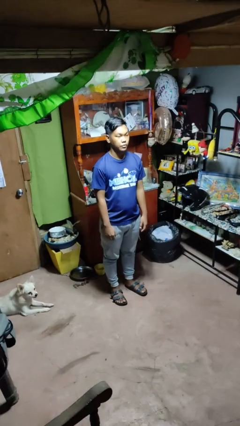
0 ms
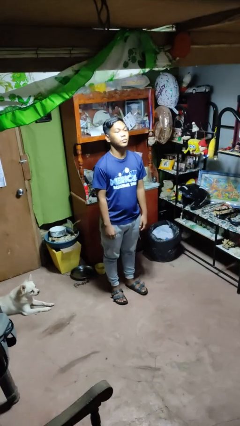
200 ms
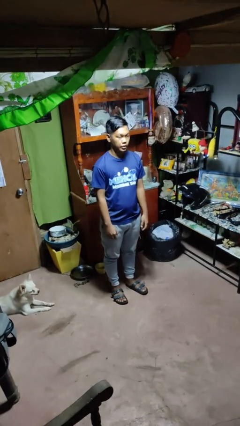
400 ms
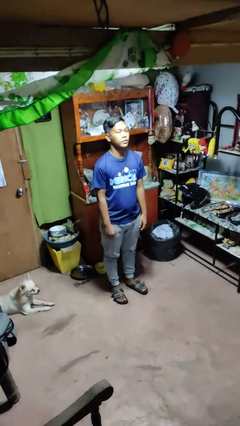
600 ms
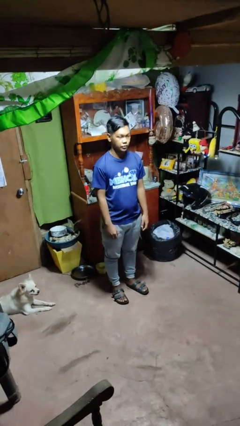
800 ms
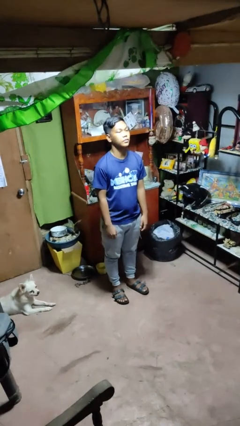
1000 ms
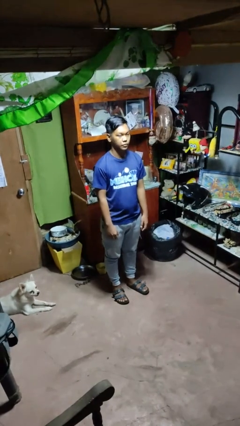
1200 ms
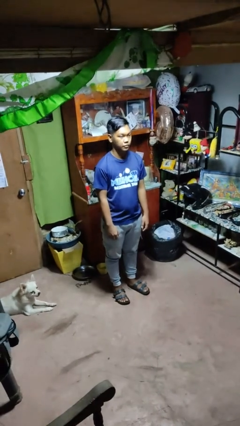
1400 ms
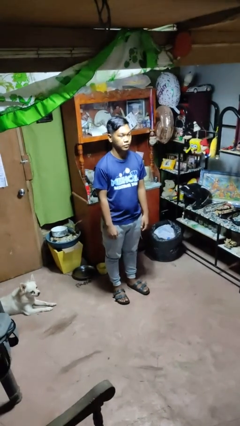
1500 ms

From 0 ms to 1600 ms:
person nods head

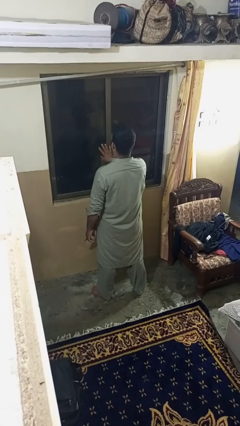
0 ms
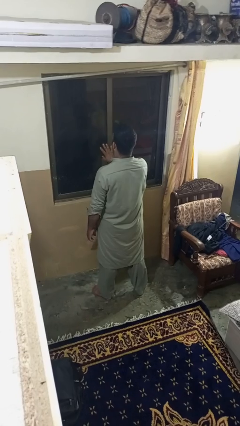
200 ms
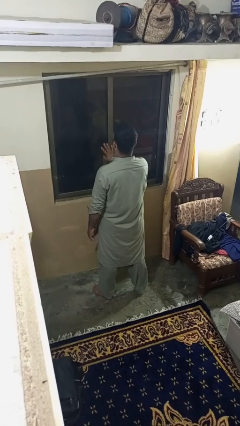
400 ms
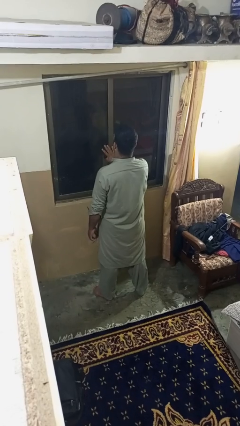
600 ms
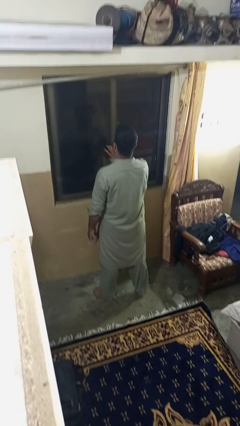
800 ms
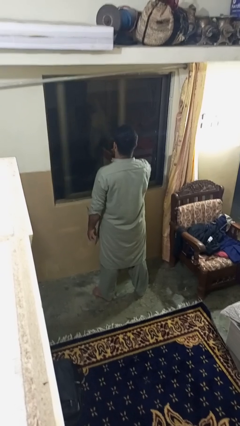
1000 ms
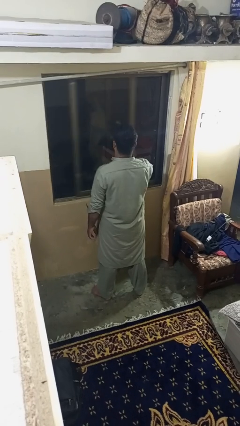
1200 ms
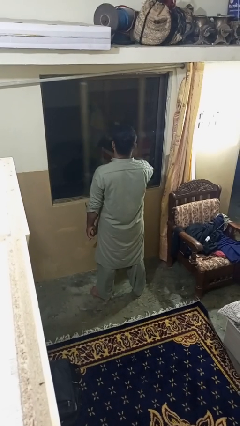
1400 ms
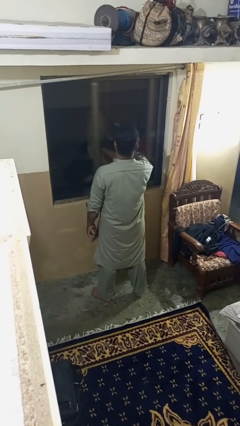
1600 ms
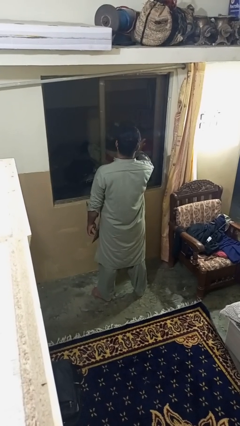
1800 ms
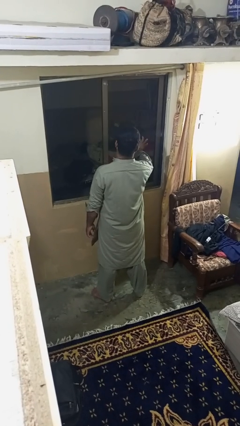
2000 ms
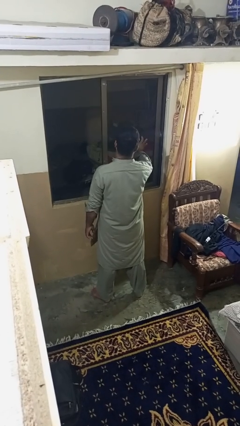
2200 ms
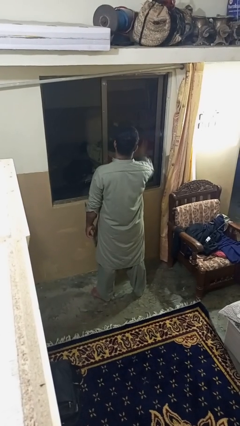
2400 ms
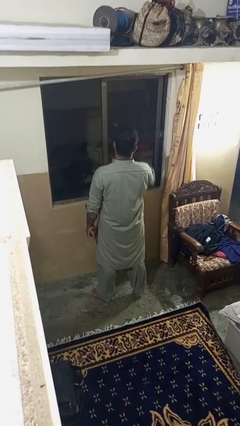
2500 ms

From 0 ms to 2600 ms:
person opens home window

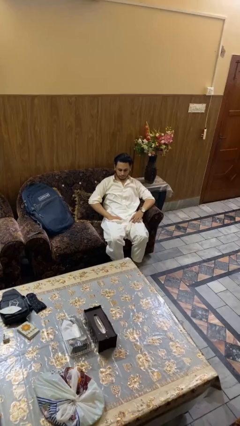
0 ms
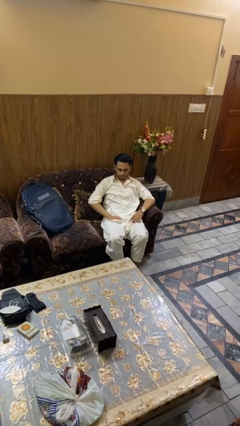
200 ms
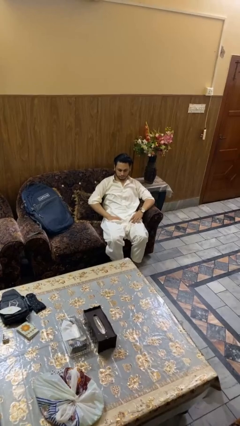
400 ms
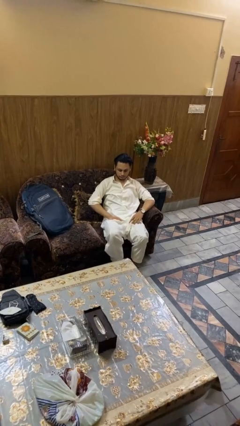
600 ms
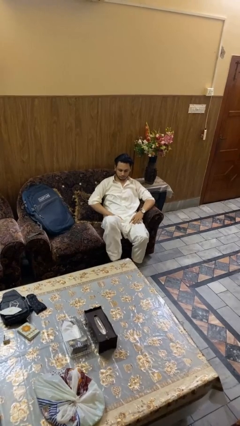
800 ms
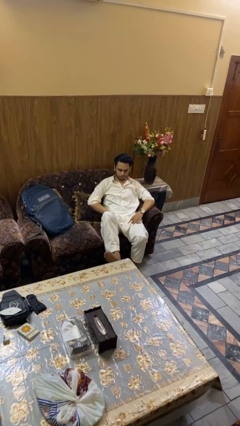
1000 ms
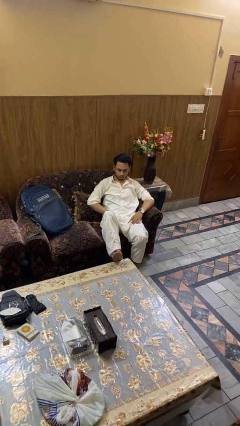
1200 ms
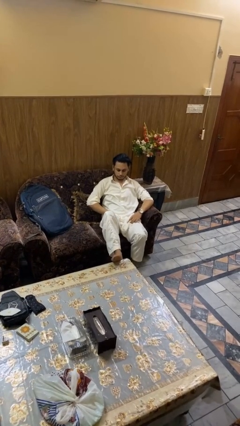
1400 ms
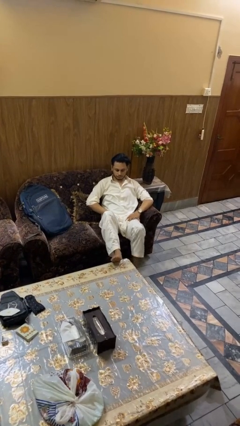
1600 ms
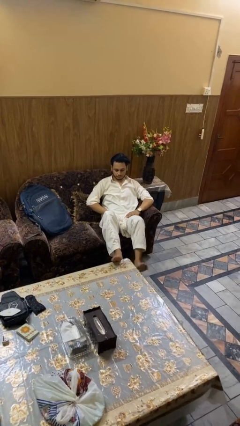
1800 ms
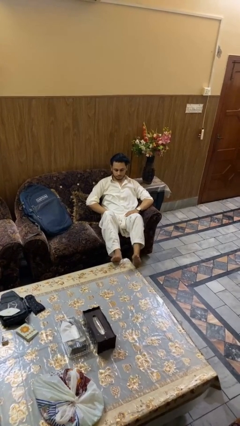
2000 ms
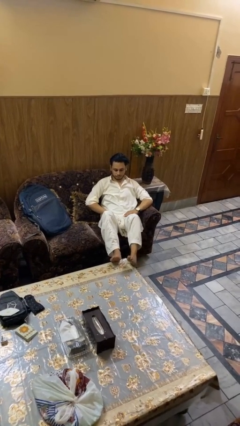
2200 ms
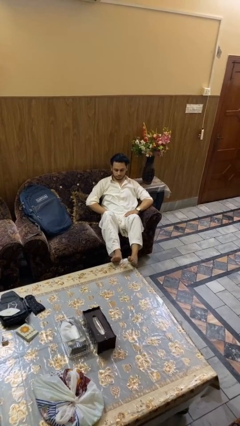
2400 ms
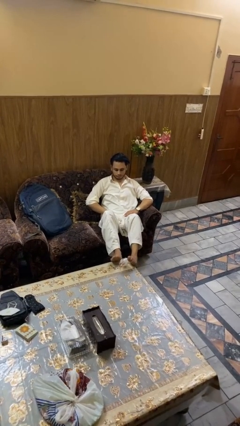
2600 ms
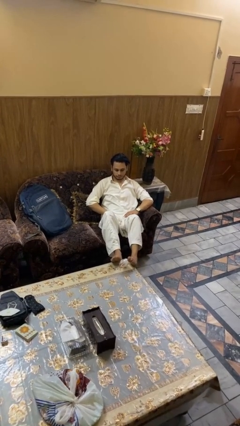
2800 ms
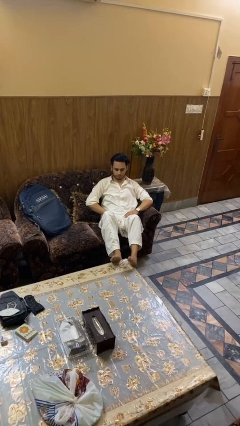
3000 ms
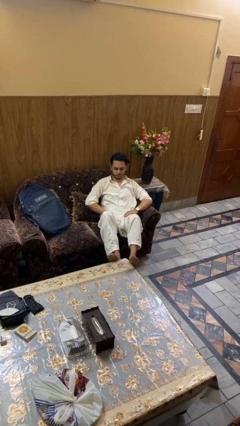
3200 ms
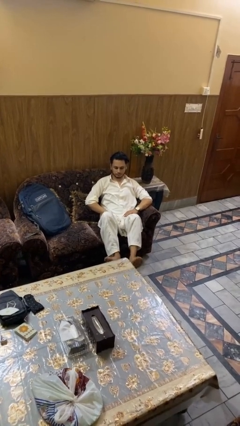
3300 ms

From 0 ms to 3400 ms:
person puts feet up

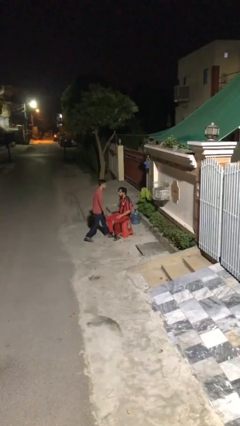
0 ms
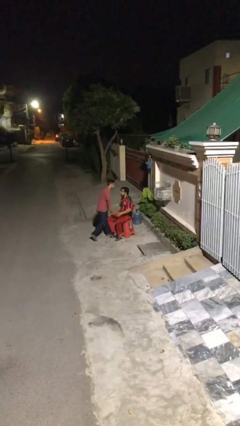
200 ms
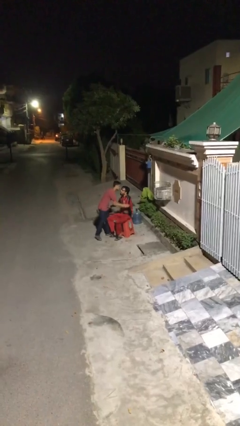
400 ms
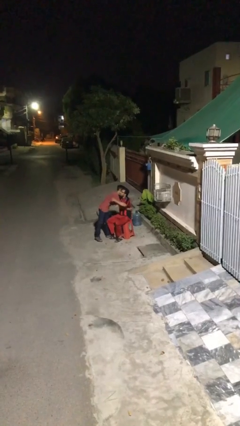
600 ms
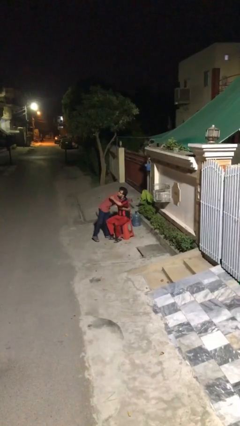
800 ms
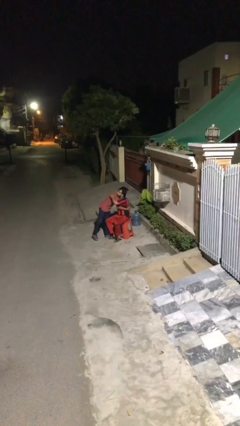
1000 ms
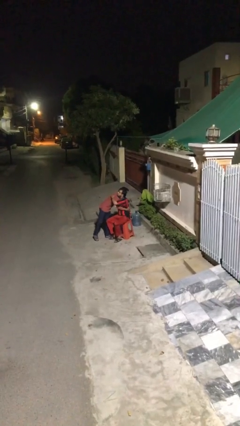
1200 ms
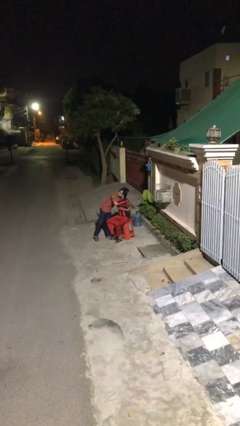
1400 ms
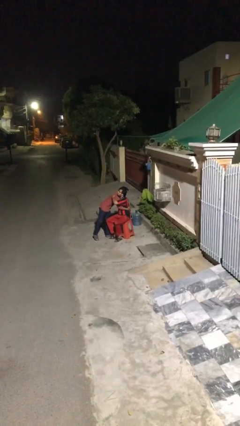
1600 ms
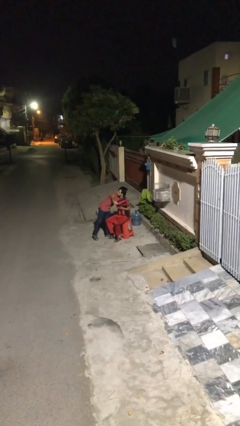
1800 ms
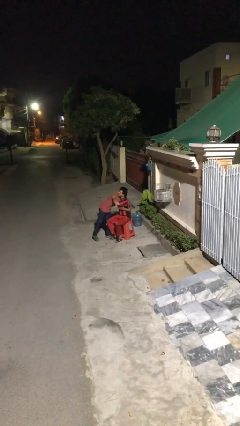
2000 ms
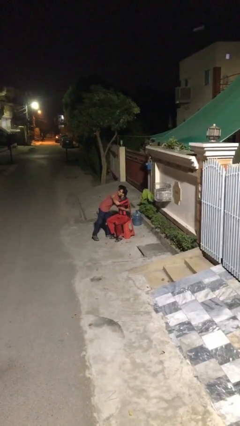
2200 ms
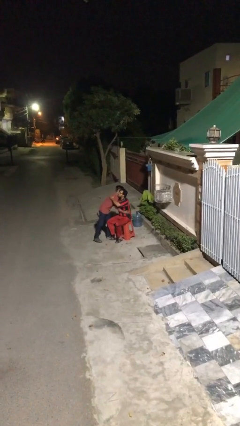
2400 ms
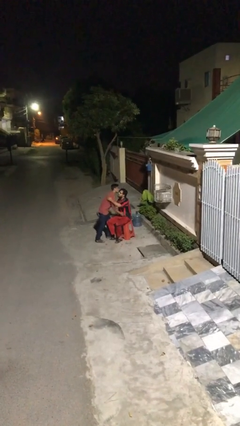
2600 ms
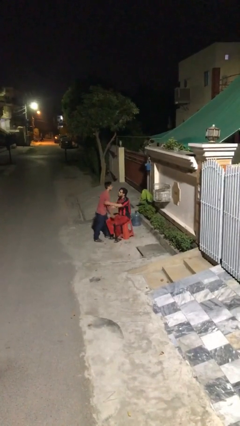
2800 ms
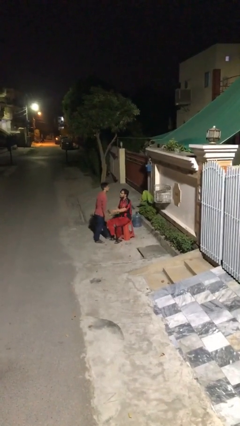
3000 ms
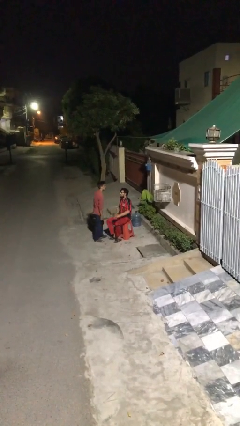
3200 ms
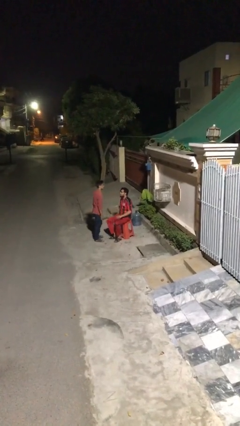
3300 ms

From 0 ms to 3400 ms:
person embraces person

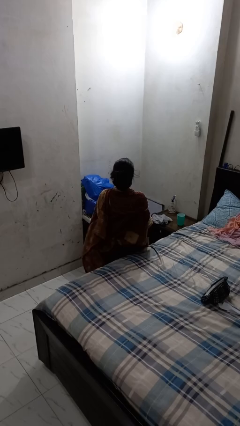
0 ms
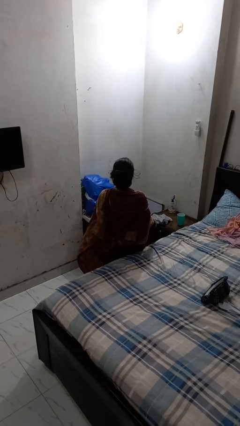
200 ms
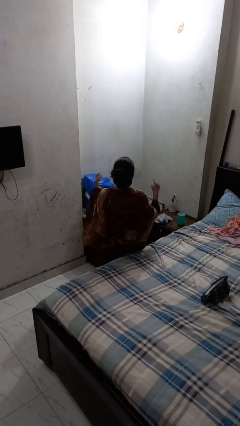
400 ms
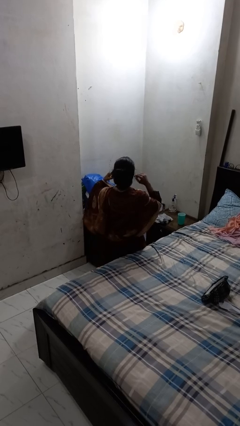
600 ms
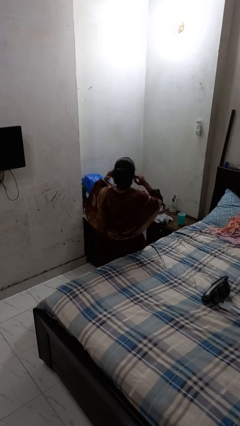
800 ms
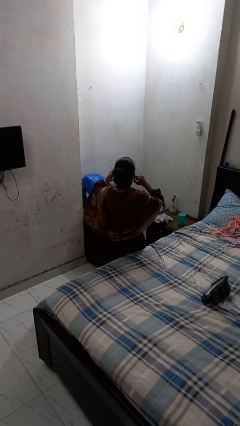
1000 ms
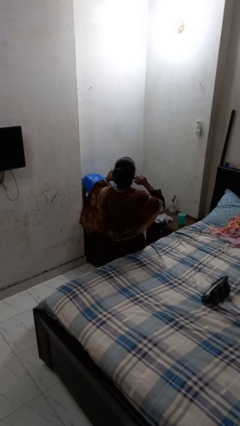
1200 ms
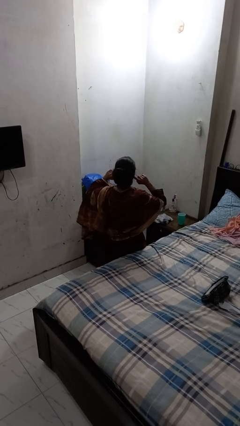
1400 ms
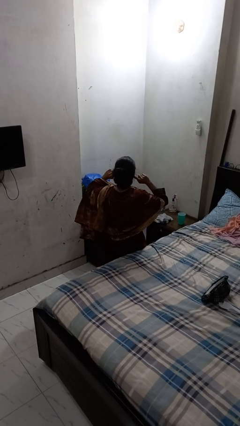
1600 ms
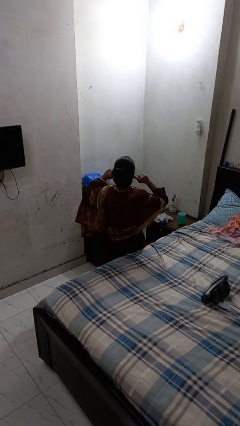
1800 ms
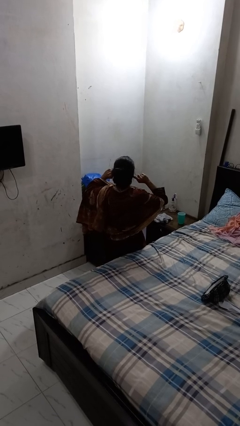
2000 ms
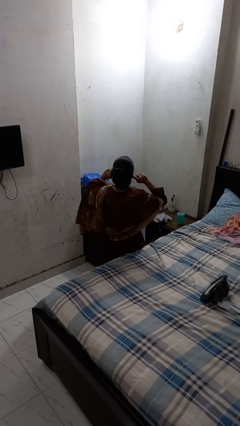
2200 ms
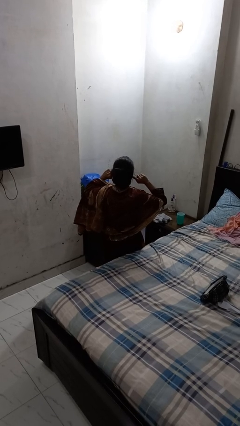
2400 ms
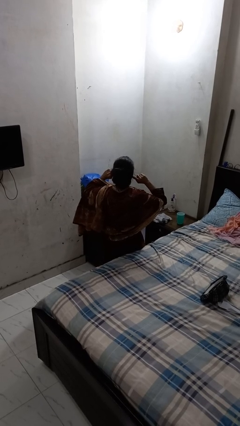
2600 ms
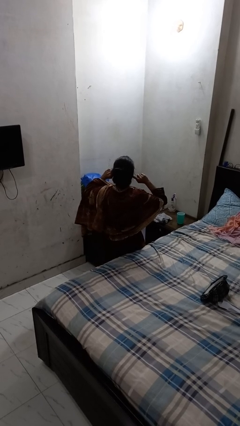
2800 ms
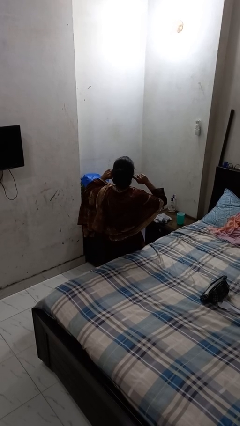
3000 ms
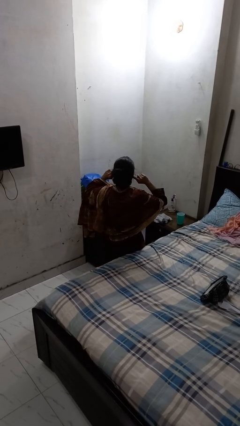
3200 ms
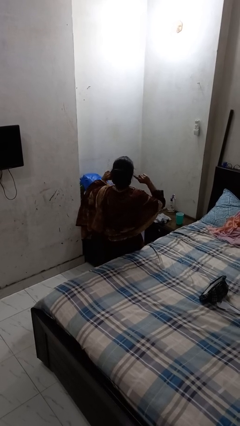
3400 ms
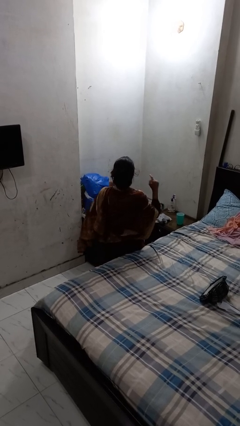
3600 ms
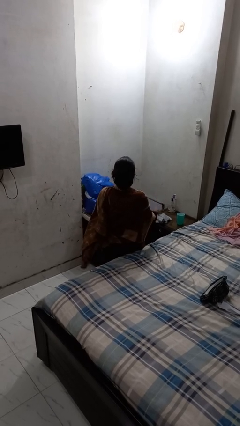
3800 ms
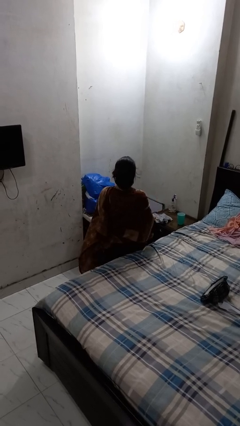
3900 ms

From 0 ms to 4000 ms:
person puts fingers in ear

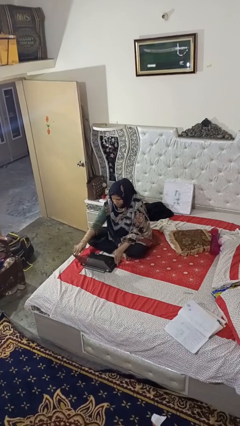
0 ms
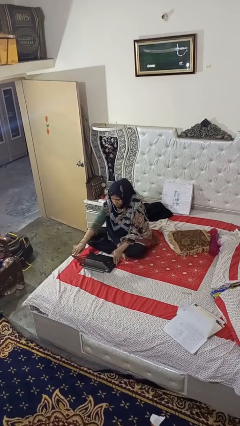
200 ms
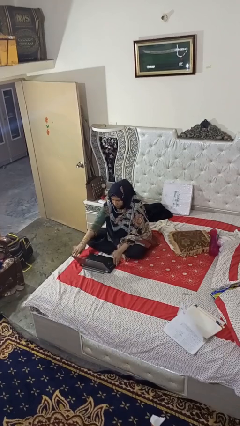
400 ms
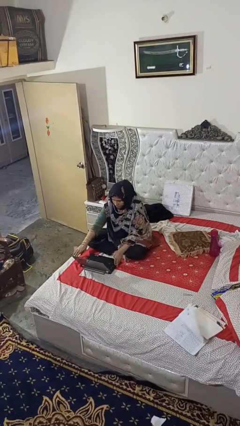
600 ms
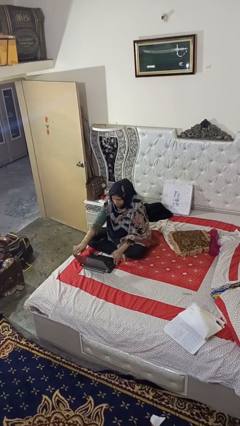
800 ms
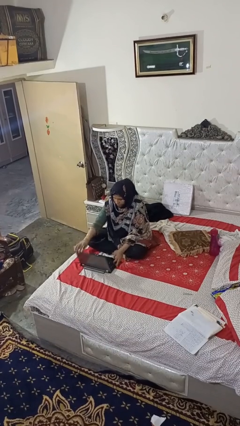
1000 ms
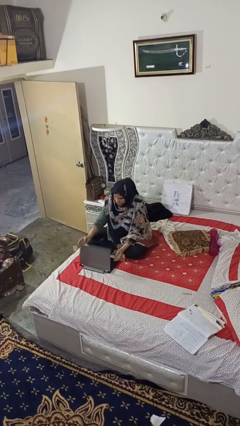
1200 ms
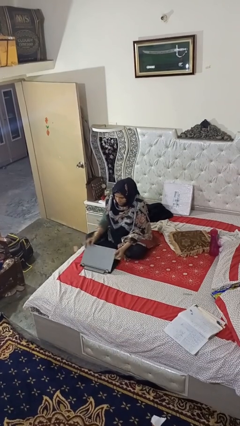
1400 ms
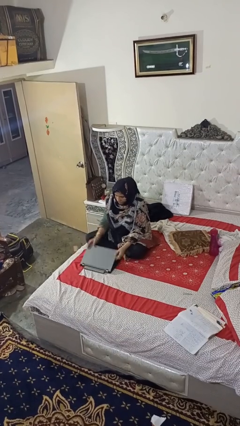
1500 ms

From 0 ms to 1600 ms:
person closes laptop

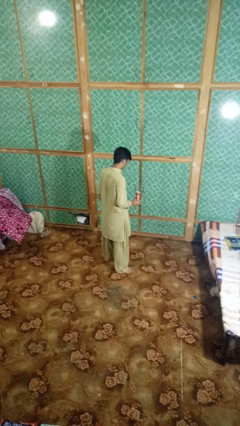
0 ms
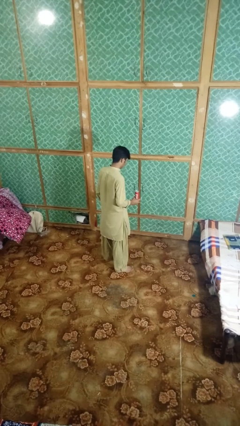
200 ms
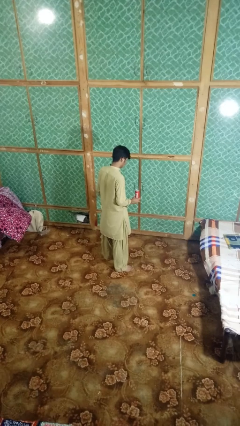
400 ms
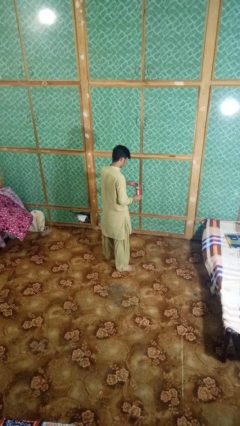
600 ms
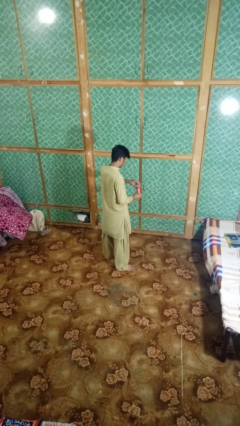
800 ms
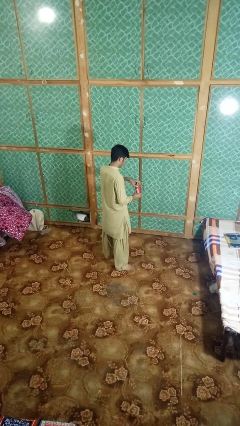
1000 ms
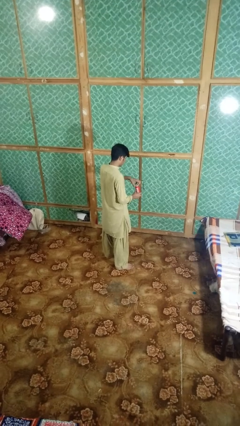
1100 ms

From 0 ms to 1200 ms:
person opens can with can opener
